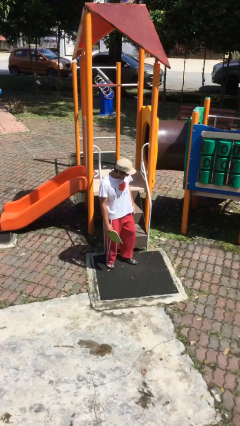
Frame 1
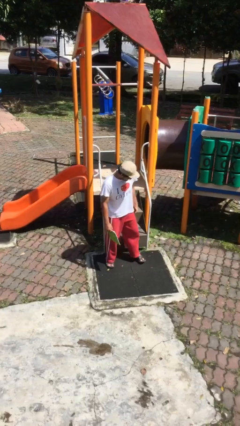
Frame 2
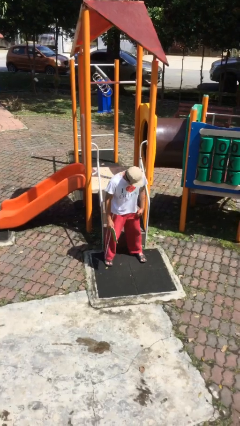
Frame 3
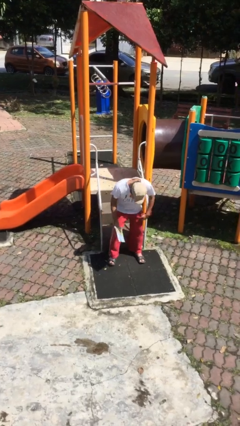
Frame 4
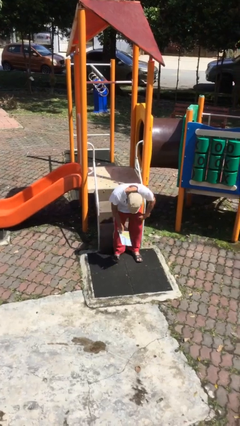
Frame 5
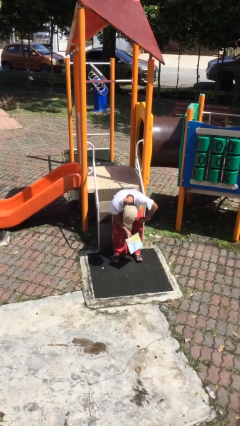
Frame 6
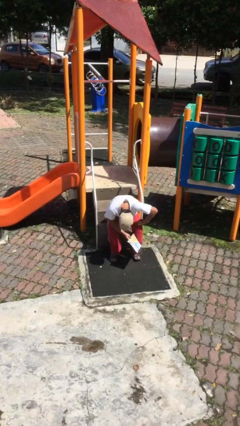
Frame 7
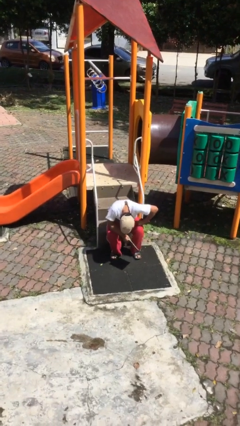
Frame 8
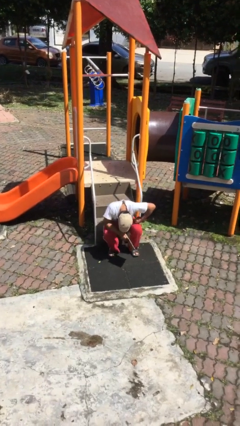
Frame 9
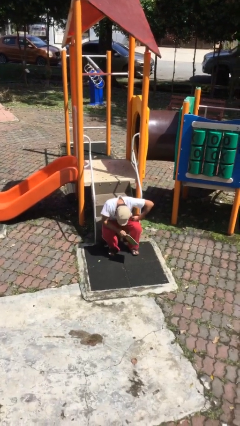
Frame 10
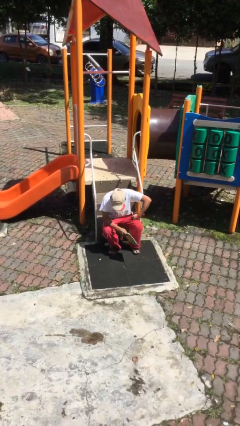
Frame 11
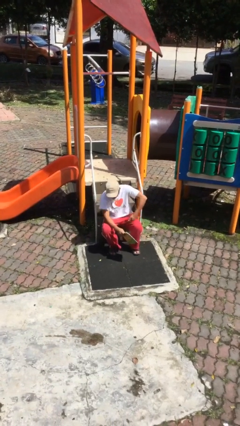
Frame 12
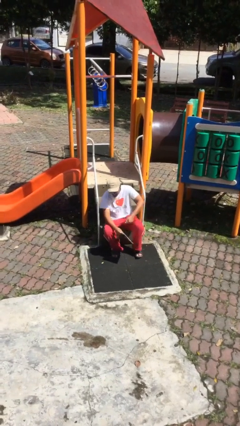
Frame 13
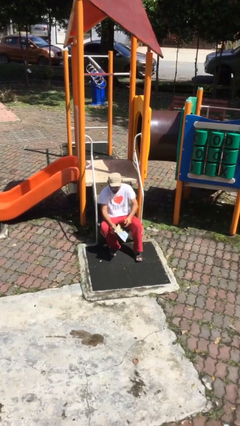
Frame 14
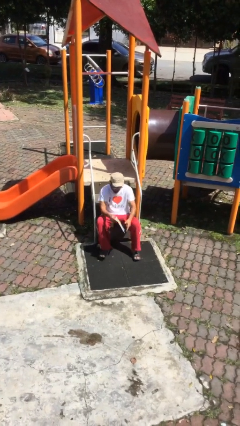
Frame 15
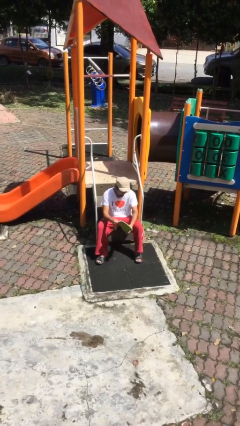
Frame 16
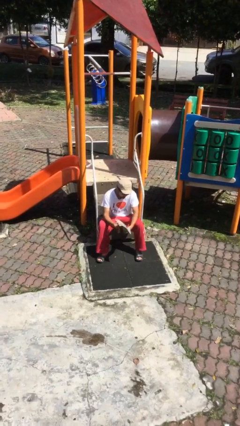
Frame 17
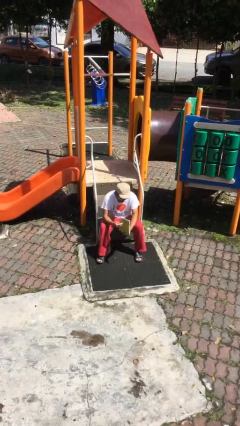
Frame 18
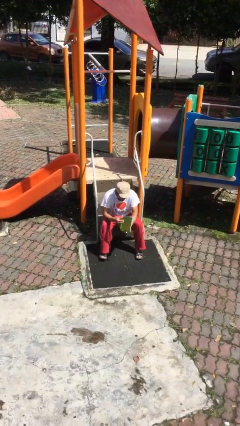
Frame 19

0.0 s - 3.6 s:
person sits down

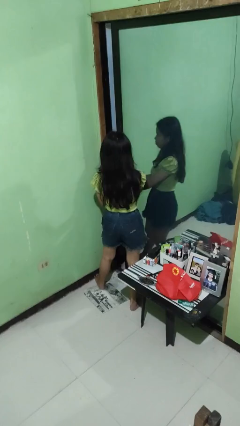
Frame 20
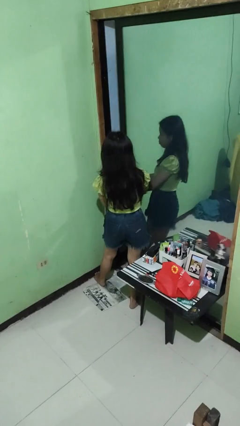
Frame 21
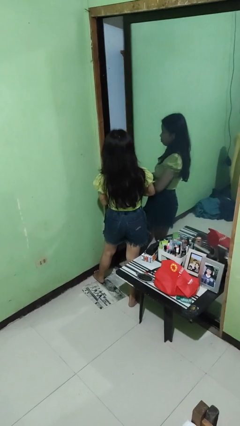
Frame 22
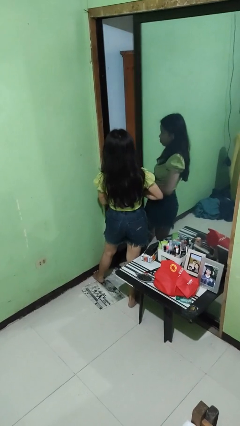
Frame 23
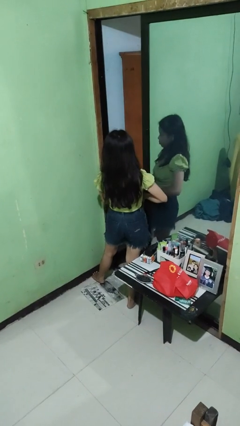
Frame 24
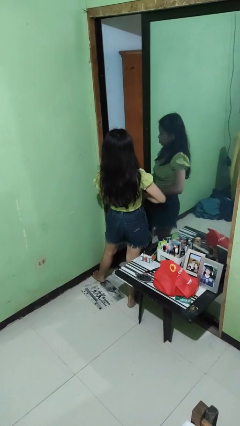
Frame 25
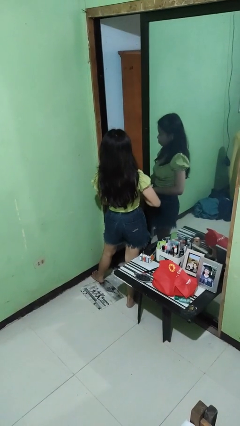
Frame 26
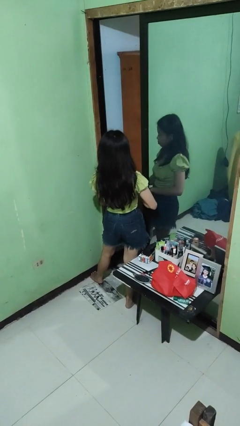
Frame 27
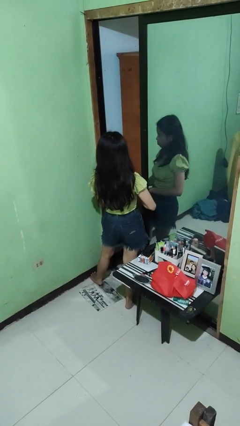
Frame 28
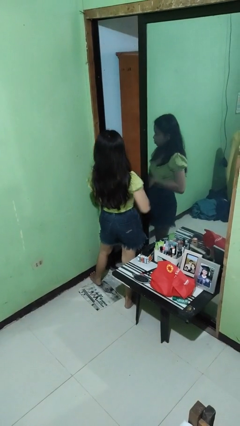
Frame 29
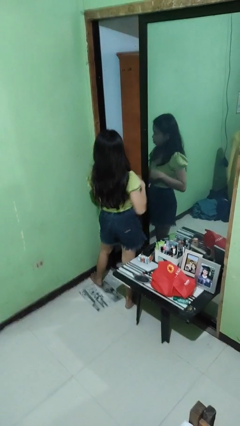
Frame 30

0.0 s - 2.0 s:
person opens sliding door

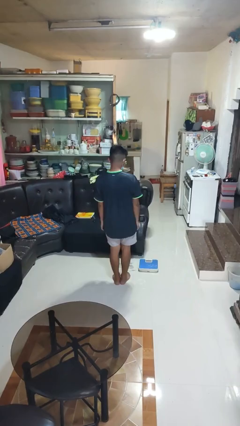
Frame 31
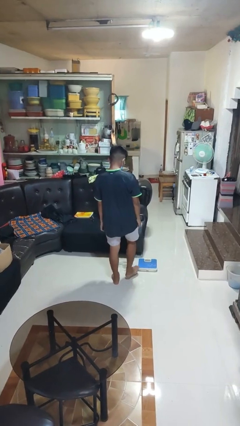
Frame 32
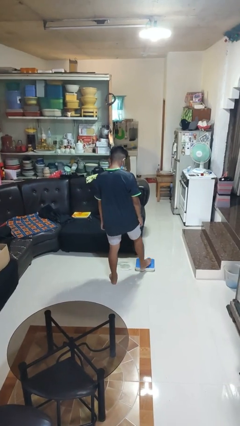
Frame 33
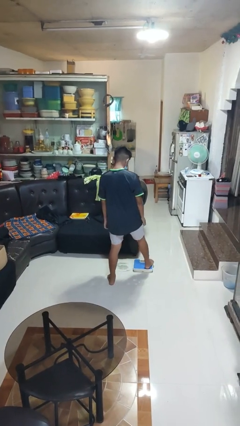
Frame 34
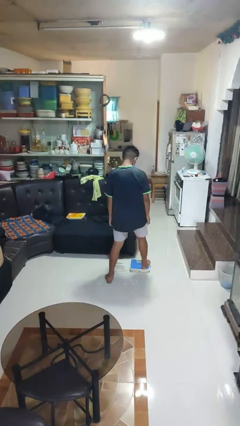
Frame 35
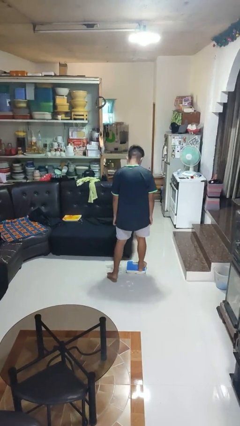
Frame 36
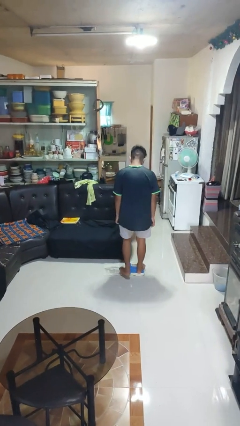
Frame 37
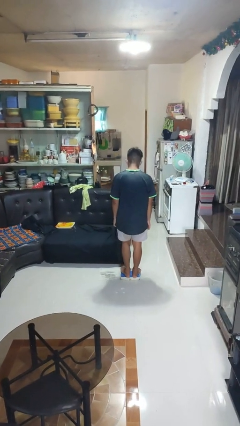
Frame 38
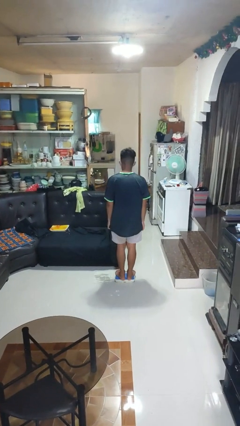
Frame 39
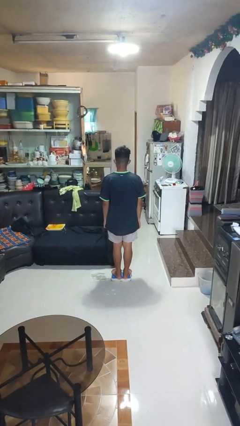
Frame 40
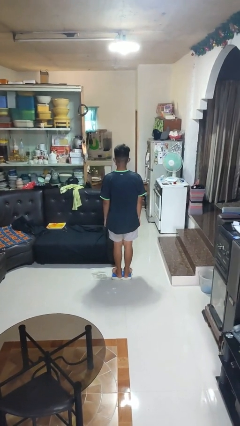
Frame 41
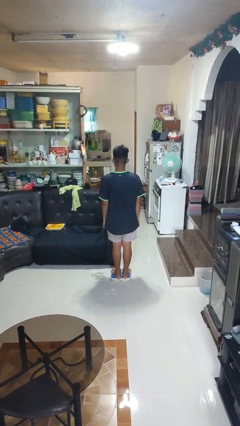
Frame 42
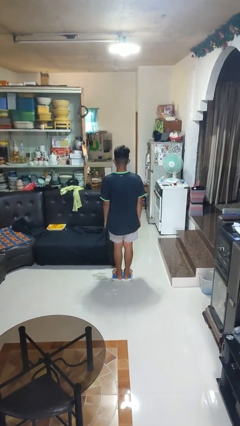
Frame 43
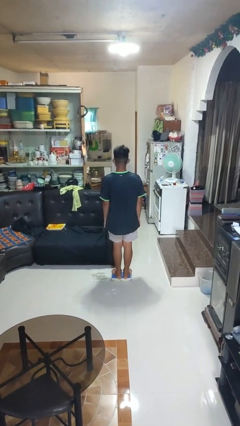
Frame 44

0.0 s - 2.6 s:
person uses bodyweight scale

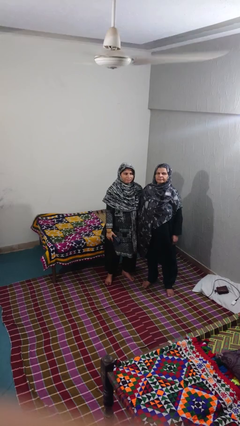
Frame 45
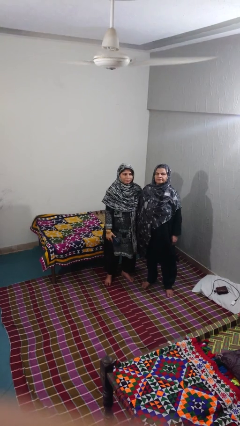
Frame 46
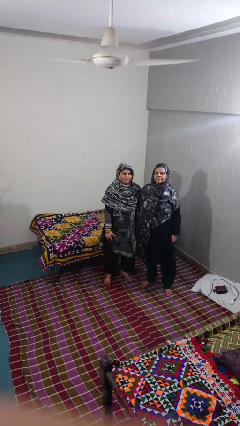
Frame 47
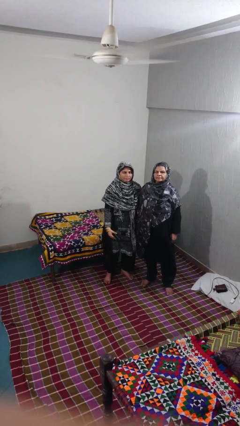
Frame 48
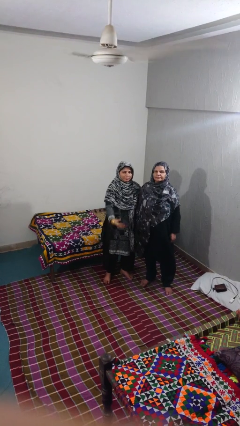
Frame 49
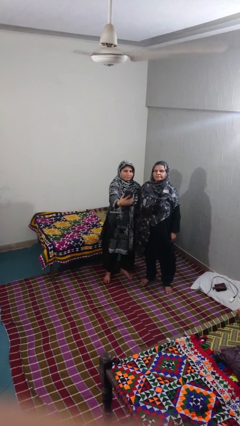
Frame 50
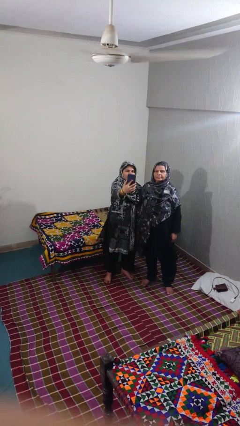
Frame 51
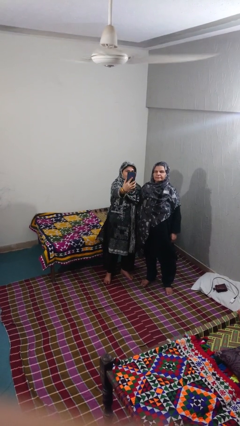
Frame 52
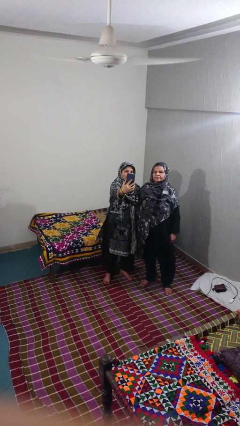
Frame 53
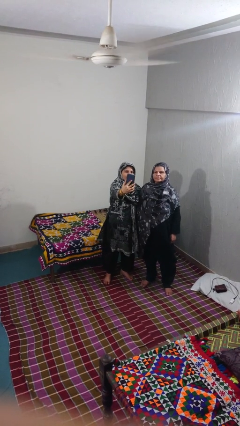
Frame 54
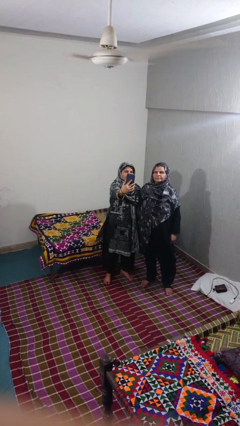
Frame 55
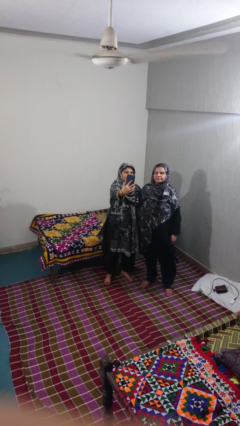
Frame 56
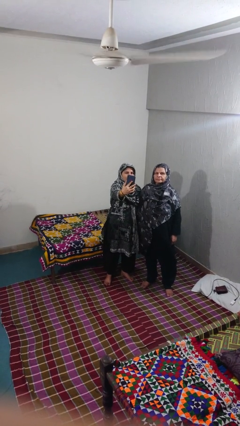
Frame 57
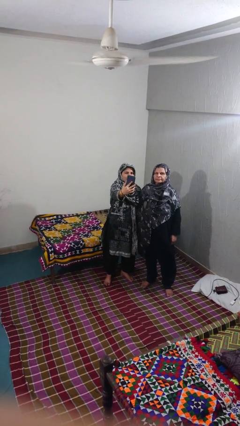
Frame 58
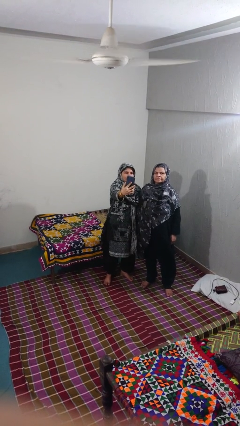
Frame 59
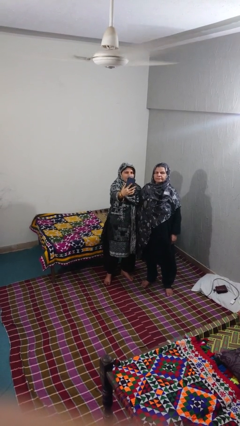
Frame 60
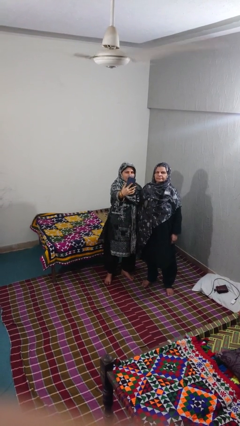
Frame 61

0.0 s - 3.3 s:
person takes selfie with person

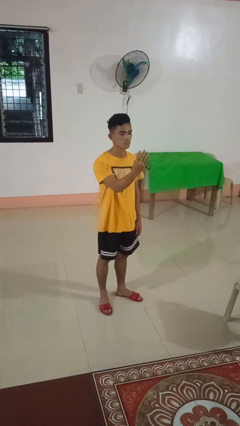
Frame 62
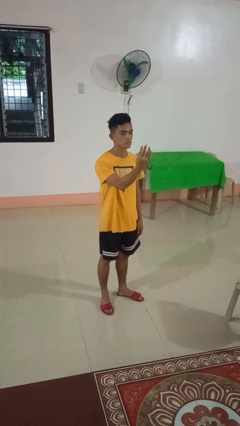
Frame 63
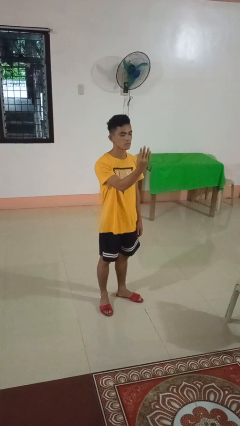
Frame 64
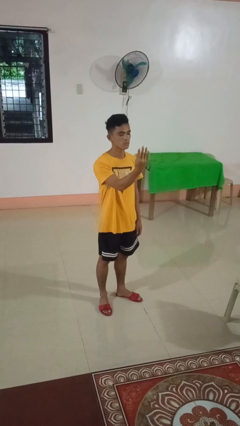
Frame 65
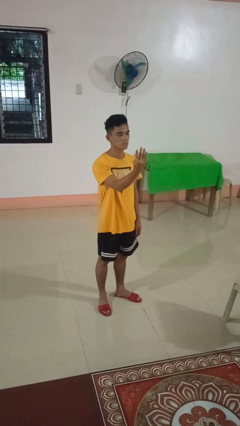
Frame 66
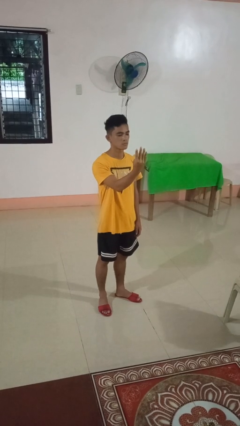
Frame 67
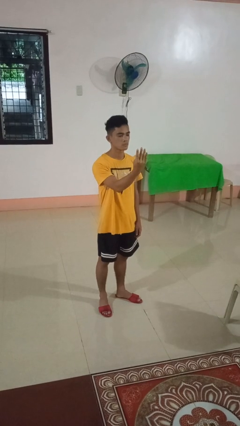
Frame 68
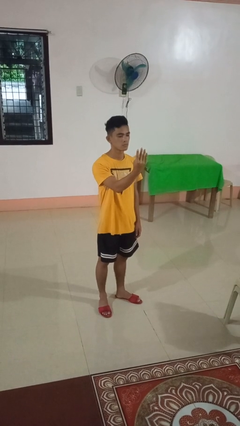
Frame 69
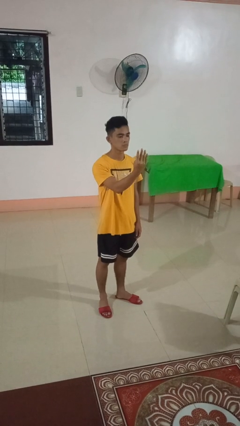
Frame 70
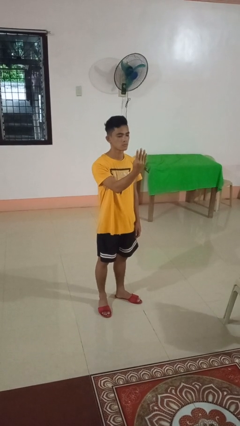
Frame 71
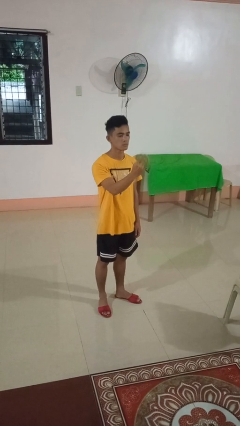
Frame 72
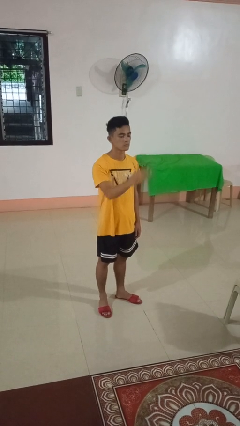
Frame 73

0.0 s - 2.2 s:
person gestures number four

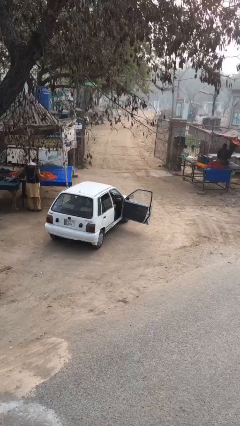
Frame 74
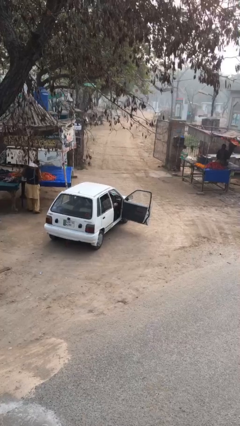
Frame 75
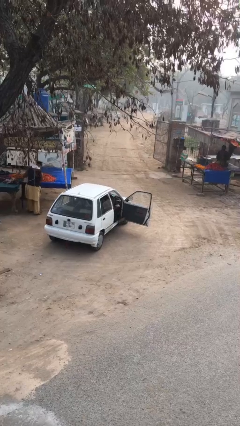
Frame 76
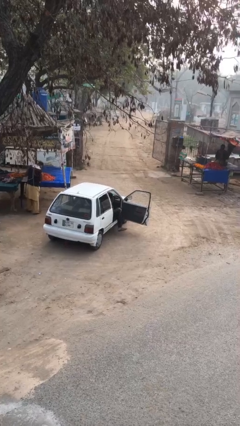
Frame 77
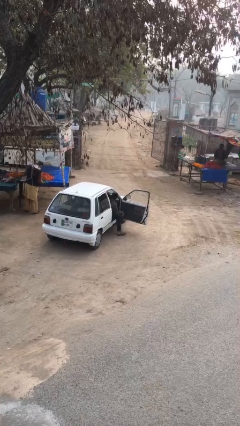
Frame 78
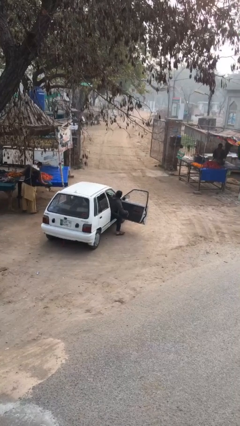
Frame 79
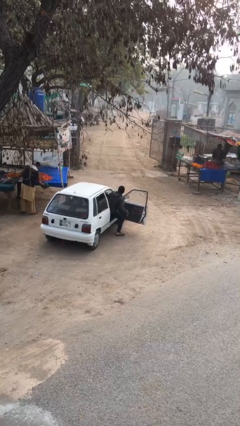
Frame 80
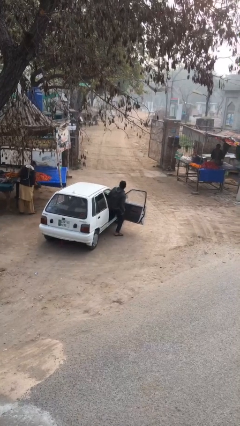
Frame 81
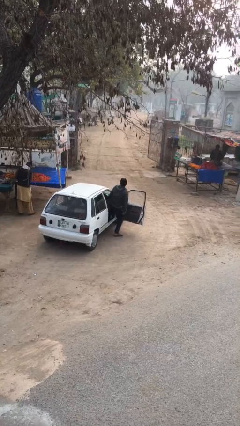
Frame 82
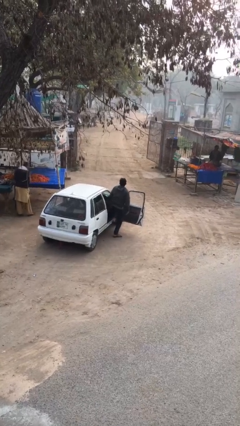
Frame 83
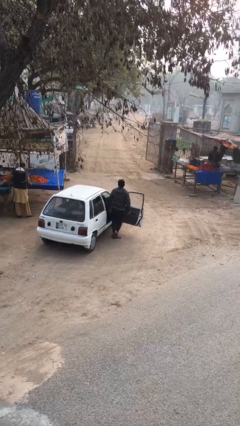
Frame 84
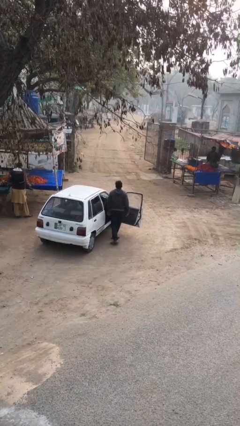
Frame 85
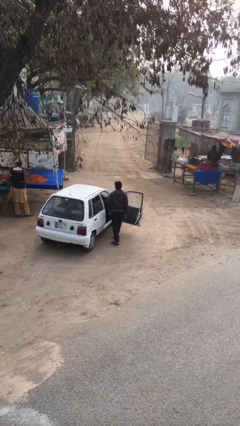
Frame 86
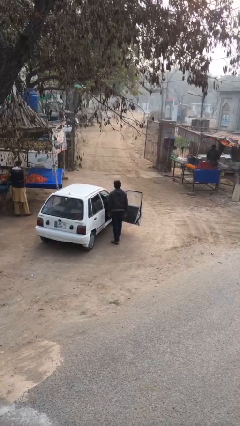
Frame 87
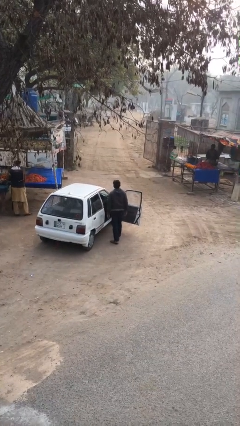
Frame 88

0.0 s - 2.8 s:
person exits car

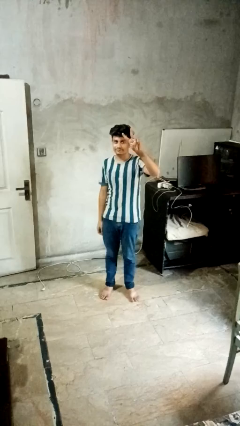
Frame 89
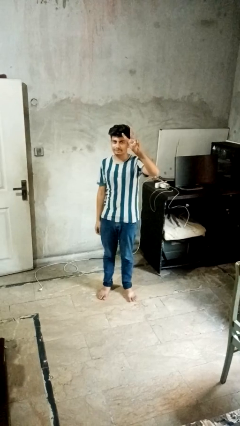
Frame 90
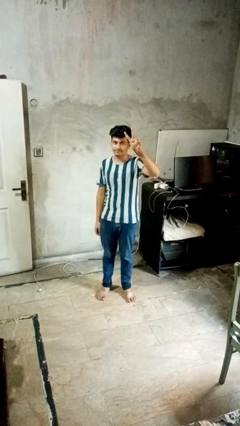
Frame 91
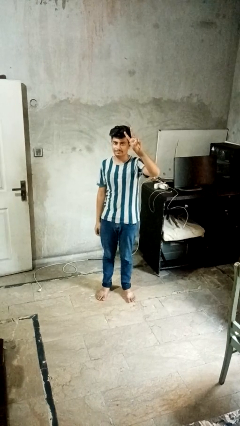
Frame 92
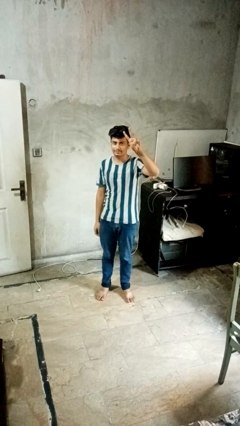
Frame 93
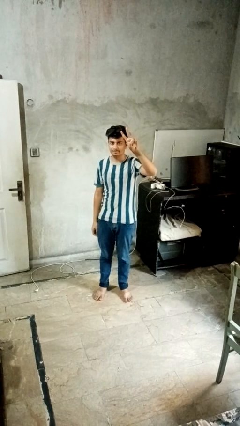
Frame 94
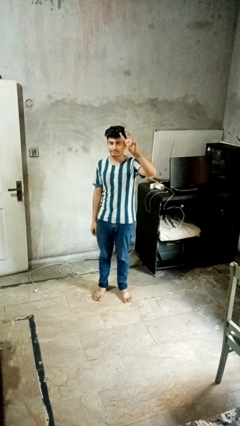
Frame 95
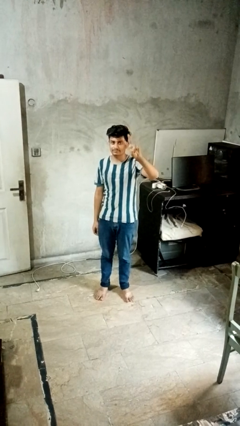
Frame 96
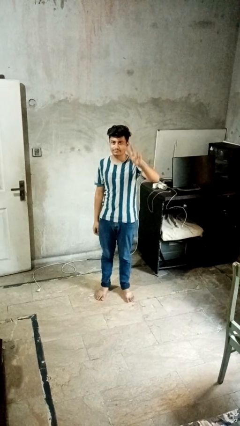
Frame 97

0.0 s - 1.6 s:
person gestures peace
